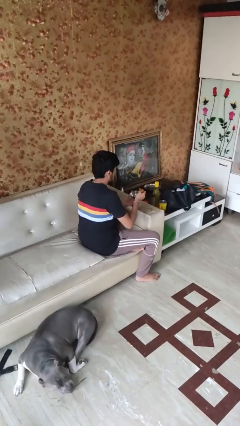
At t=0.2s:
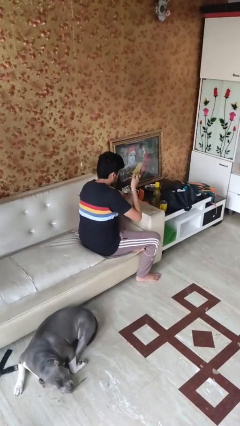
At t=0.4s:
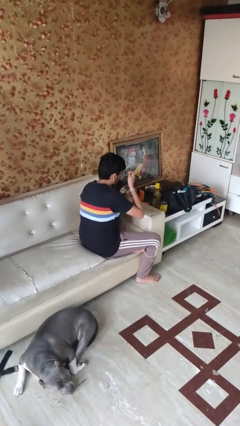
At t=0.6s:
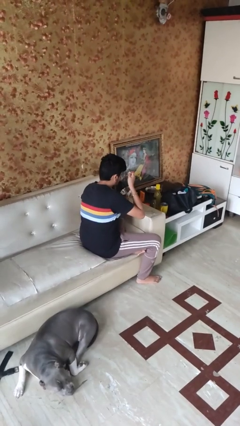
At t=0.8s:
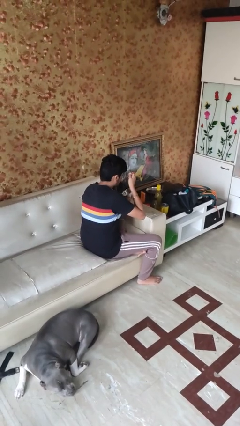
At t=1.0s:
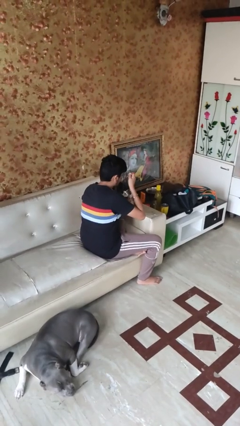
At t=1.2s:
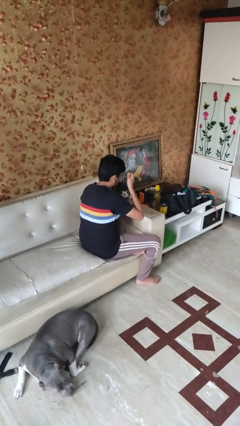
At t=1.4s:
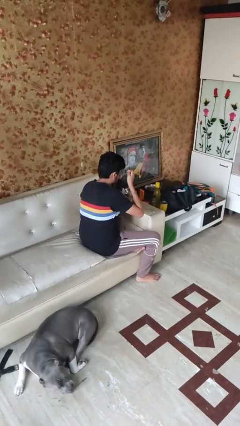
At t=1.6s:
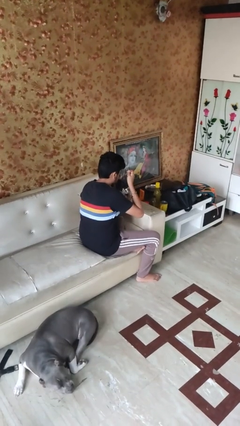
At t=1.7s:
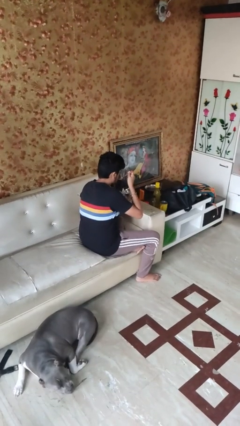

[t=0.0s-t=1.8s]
person eats with utensil

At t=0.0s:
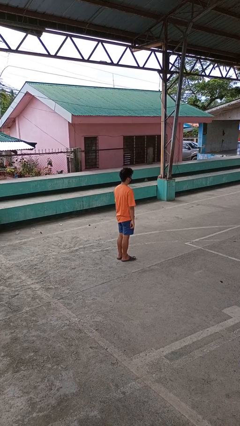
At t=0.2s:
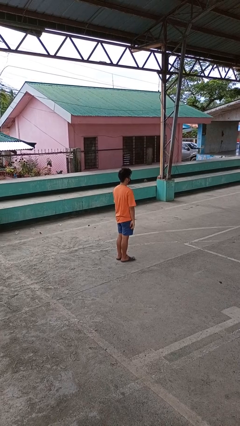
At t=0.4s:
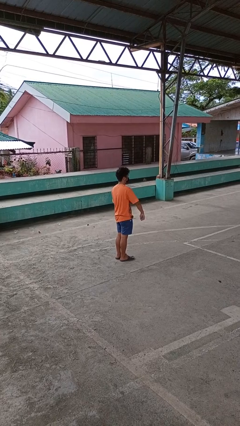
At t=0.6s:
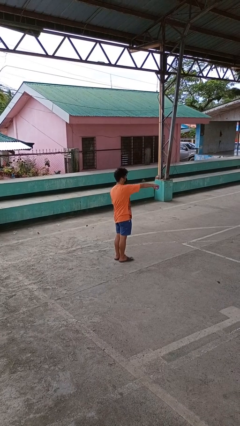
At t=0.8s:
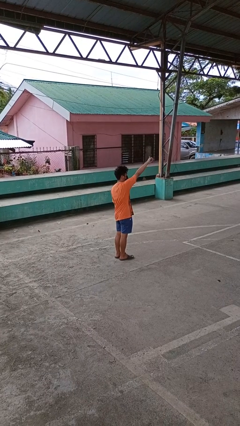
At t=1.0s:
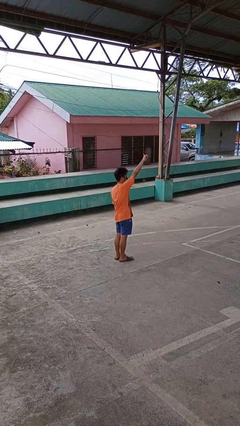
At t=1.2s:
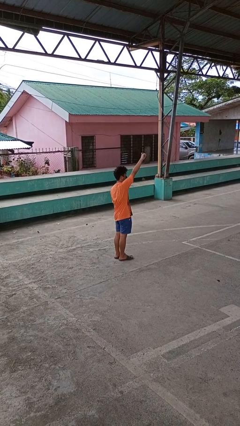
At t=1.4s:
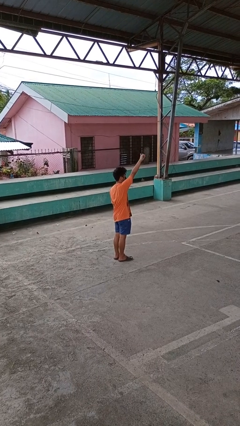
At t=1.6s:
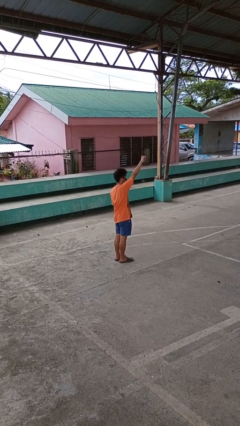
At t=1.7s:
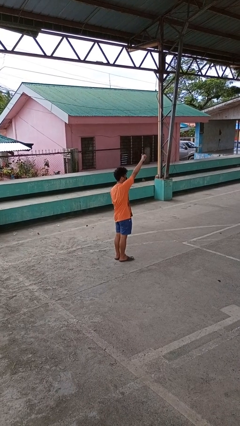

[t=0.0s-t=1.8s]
person gestures swipe up

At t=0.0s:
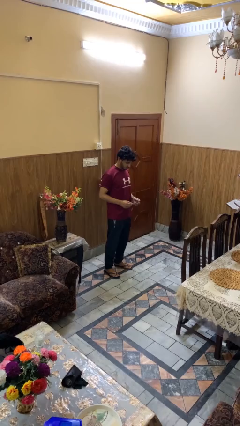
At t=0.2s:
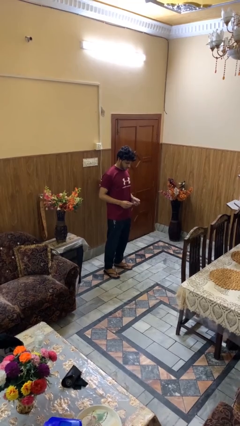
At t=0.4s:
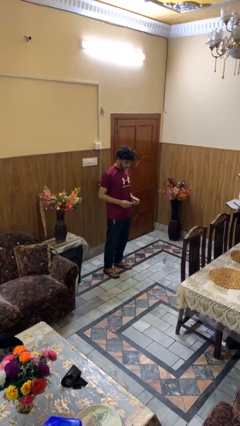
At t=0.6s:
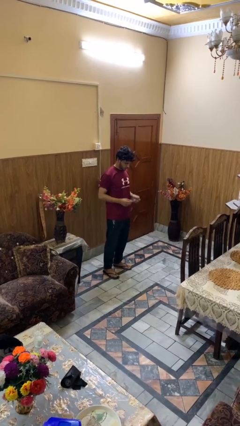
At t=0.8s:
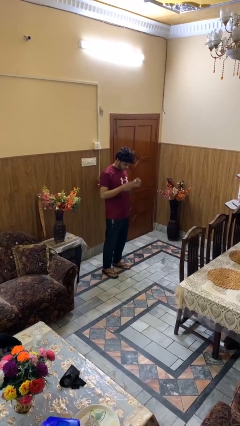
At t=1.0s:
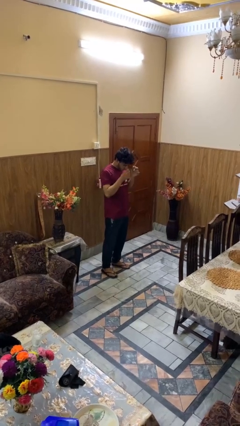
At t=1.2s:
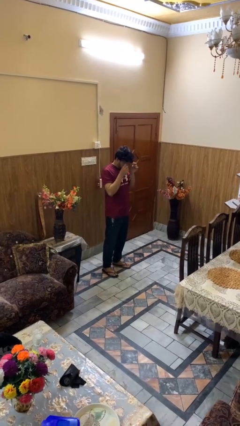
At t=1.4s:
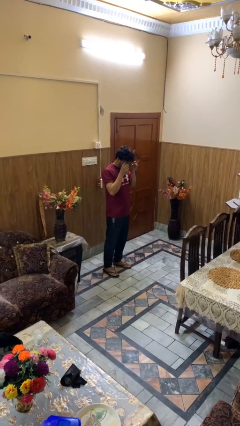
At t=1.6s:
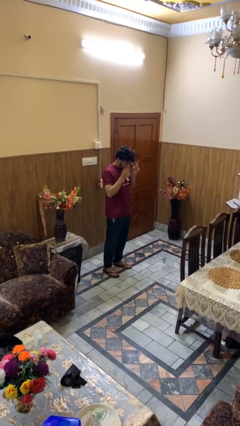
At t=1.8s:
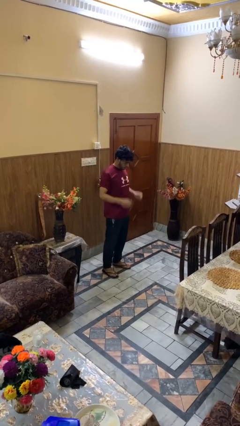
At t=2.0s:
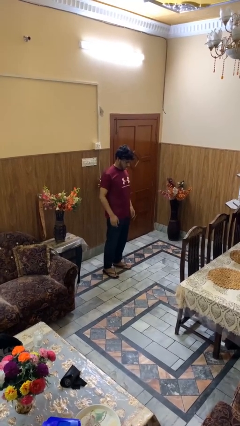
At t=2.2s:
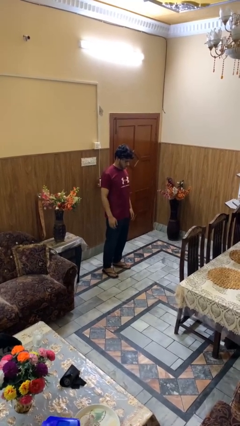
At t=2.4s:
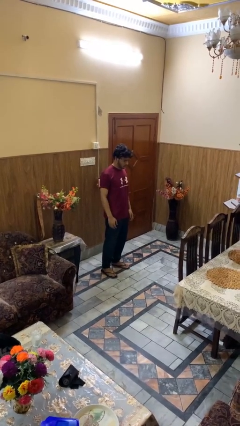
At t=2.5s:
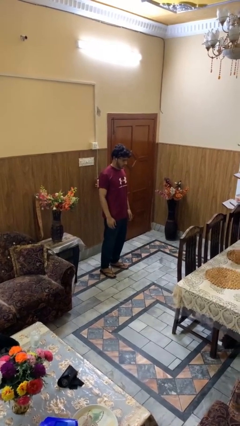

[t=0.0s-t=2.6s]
person puts on glasses

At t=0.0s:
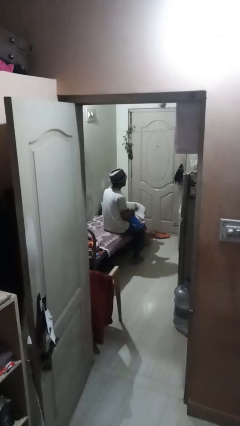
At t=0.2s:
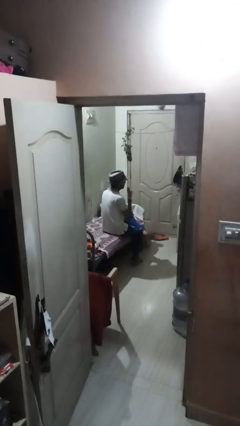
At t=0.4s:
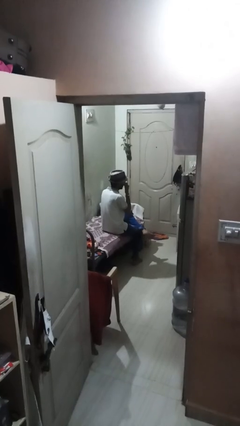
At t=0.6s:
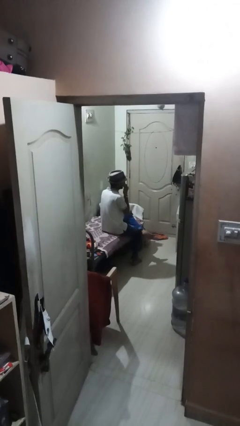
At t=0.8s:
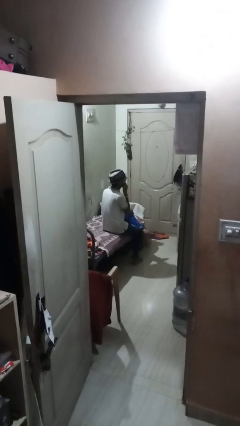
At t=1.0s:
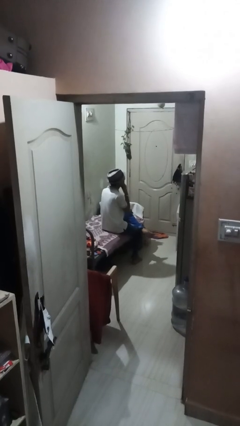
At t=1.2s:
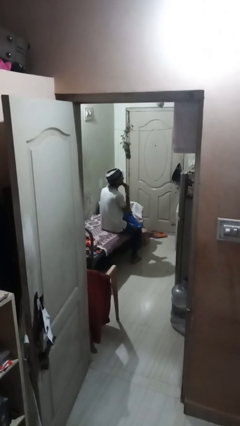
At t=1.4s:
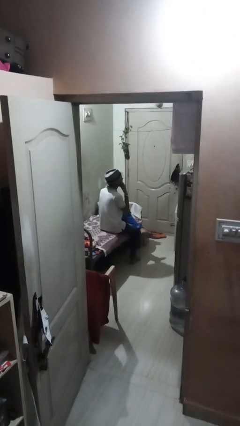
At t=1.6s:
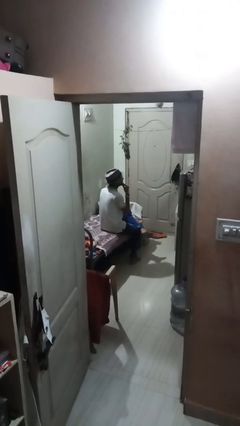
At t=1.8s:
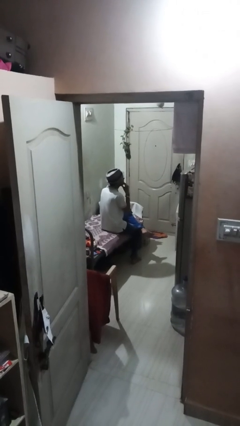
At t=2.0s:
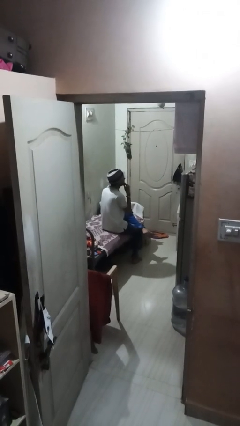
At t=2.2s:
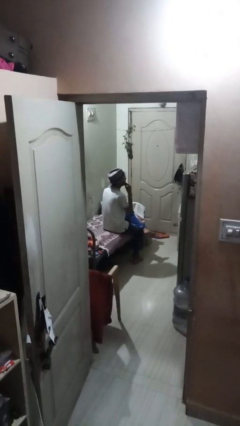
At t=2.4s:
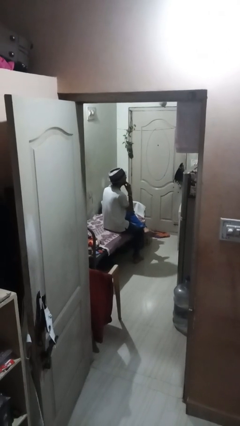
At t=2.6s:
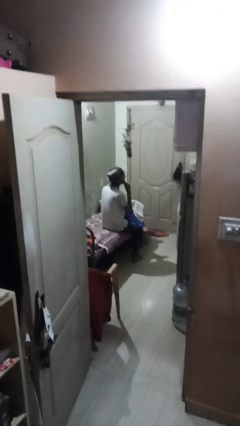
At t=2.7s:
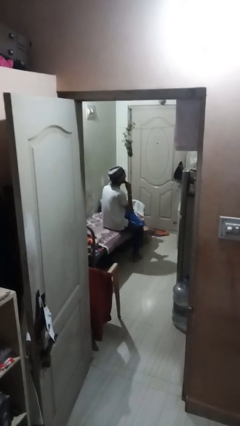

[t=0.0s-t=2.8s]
person strokes chin

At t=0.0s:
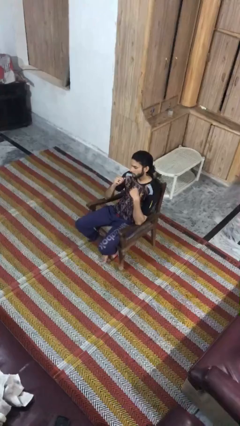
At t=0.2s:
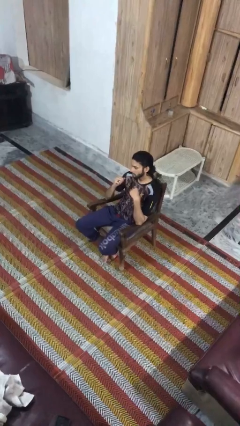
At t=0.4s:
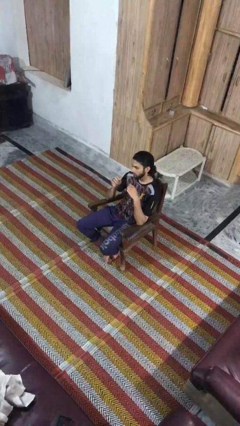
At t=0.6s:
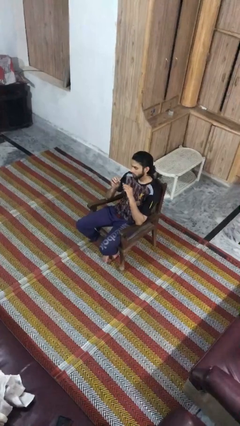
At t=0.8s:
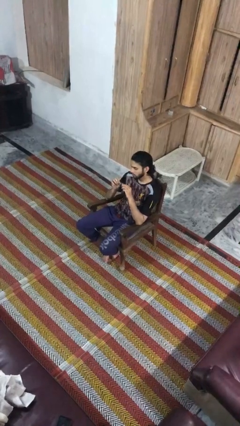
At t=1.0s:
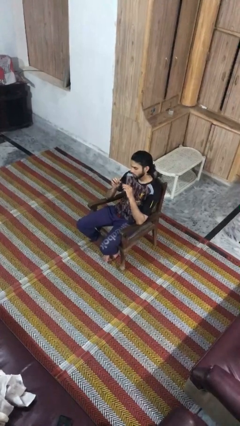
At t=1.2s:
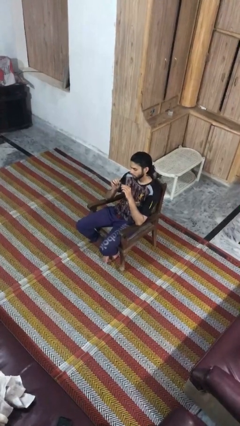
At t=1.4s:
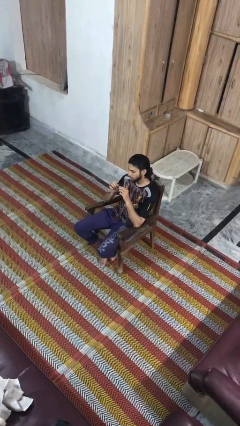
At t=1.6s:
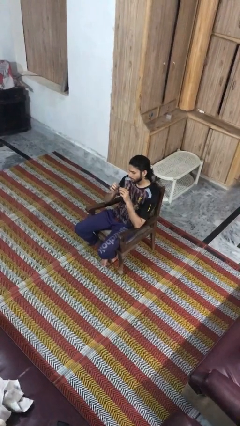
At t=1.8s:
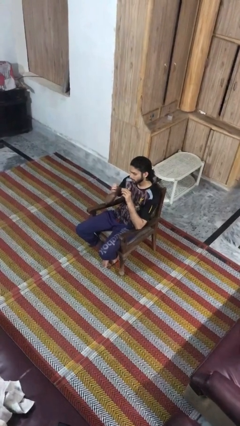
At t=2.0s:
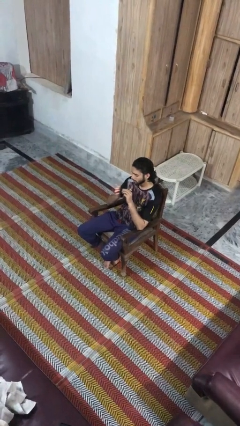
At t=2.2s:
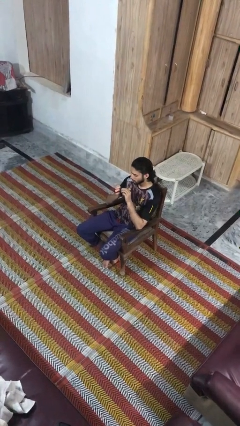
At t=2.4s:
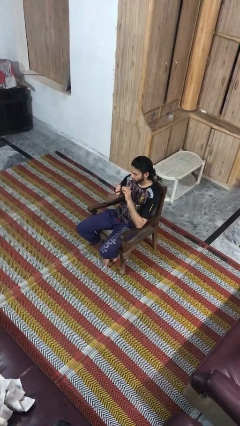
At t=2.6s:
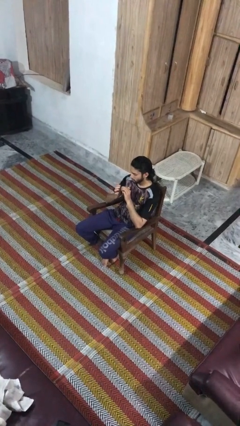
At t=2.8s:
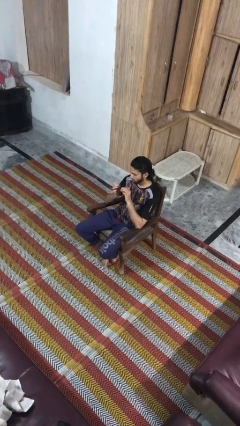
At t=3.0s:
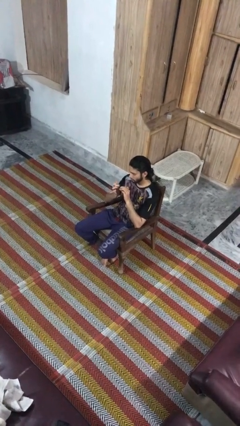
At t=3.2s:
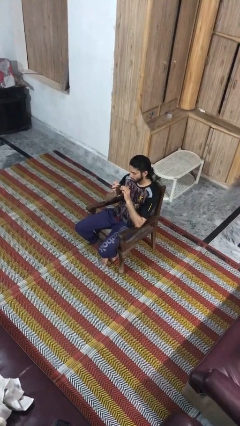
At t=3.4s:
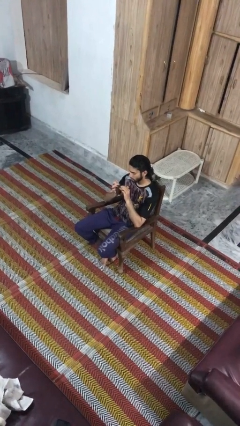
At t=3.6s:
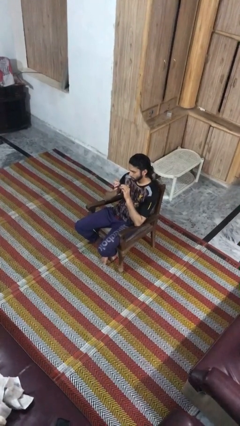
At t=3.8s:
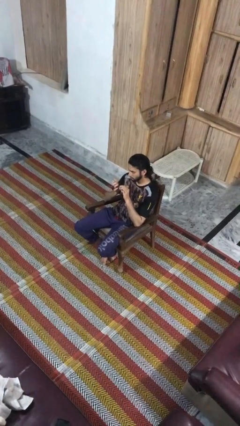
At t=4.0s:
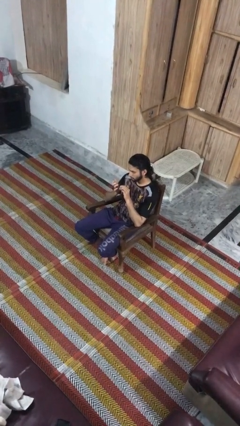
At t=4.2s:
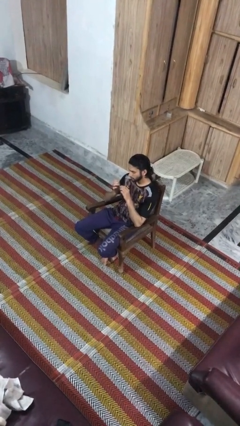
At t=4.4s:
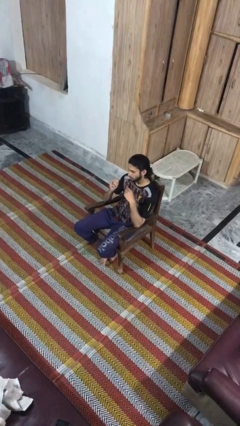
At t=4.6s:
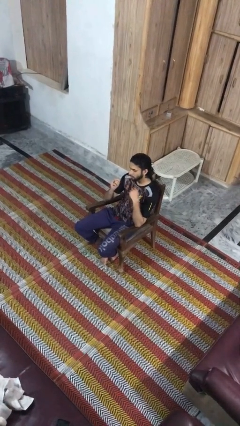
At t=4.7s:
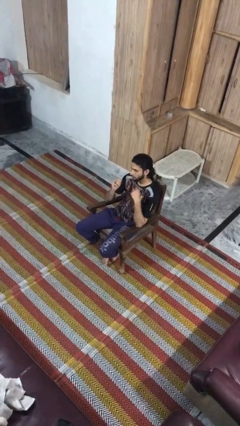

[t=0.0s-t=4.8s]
person files fingernails

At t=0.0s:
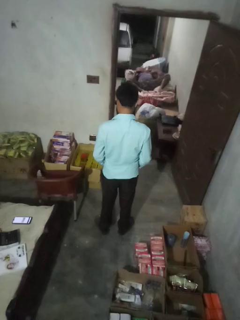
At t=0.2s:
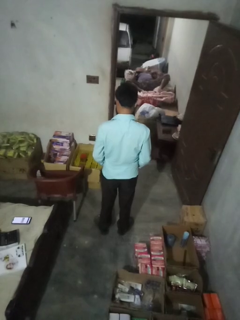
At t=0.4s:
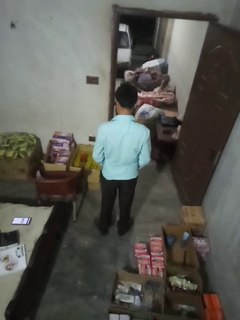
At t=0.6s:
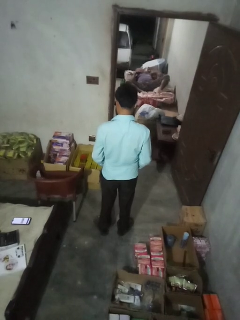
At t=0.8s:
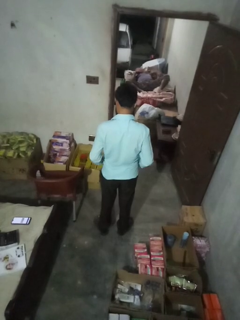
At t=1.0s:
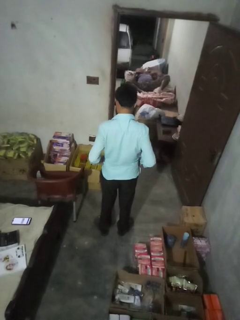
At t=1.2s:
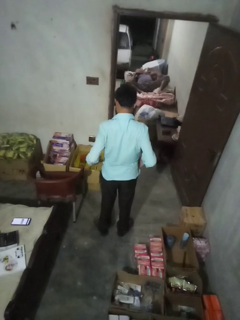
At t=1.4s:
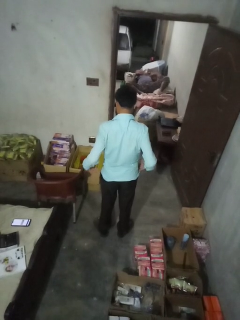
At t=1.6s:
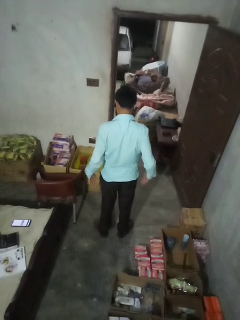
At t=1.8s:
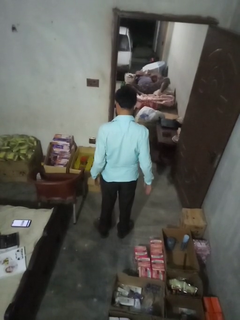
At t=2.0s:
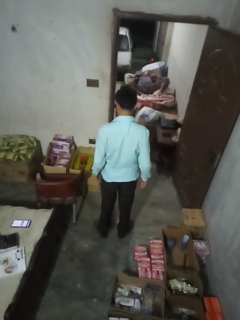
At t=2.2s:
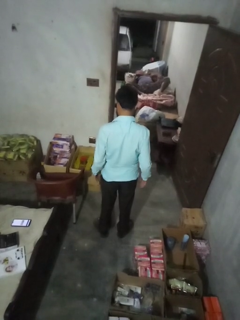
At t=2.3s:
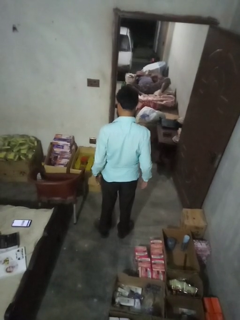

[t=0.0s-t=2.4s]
person puts hands in back pockets

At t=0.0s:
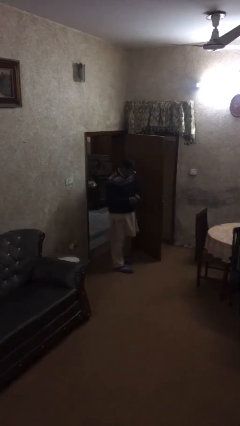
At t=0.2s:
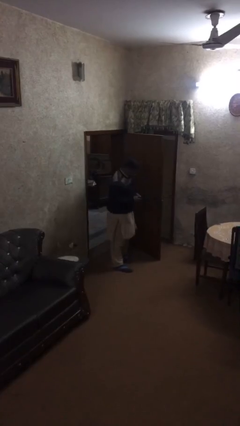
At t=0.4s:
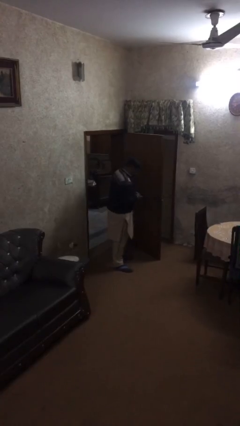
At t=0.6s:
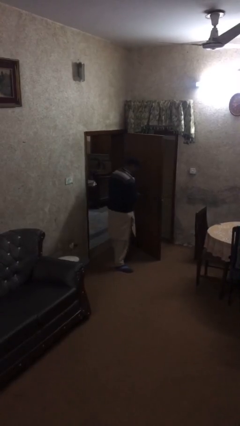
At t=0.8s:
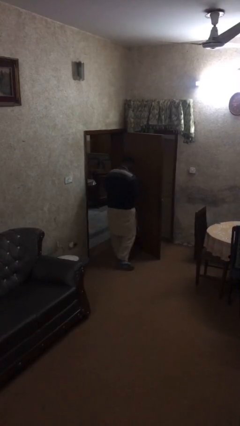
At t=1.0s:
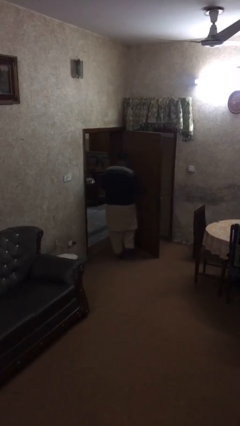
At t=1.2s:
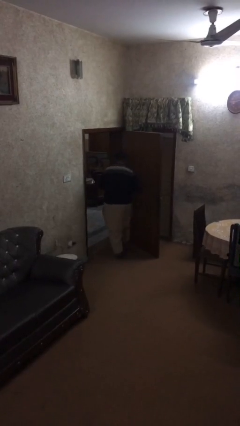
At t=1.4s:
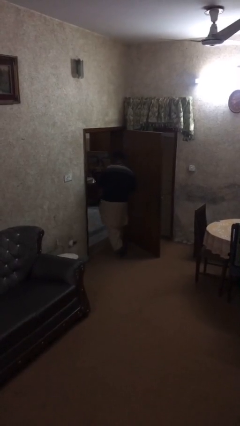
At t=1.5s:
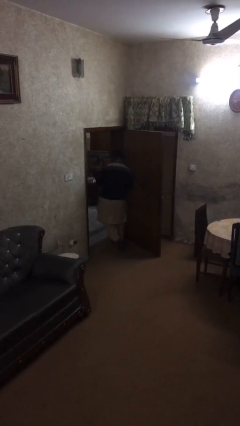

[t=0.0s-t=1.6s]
person exits scene through structure
